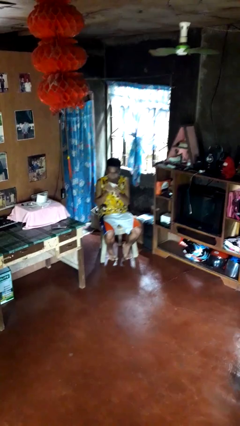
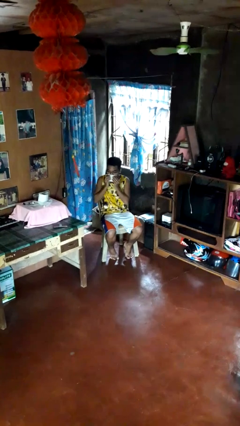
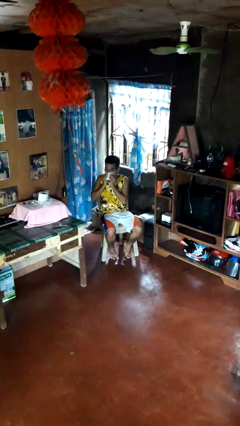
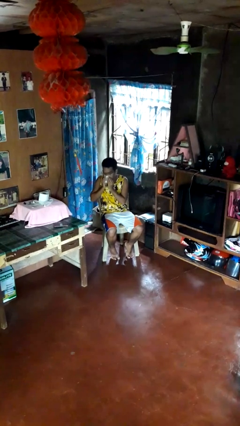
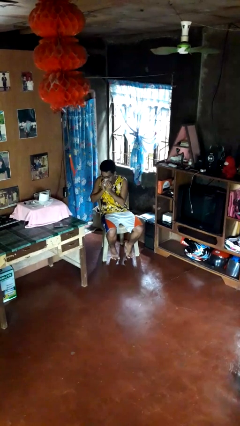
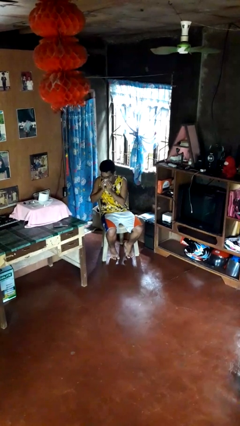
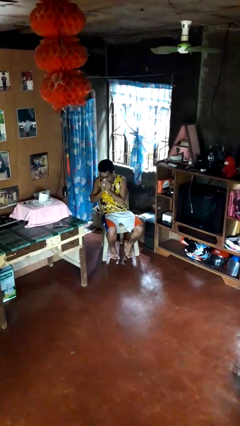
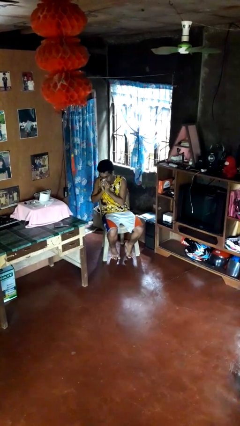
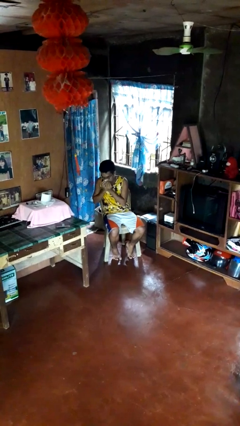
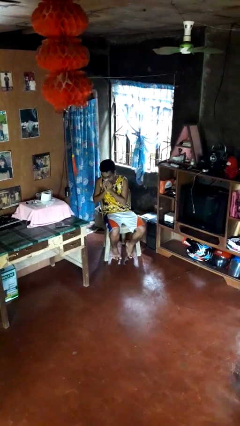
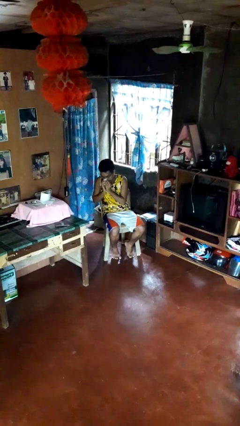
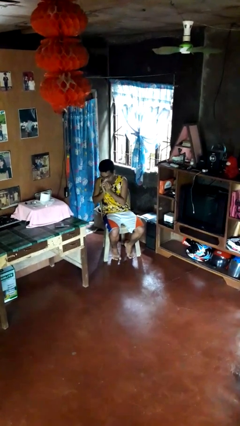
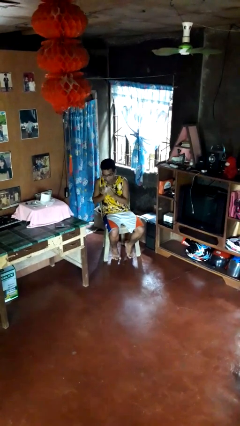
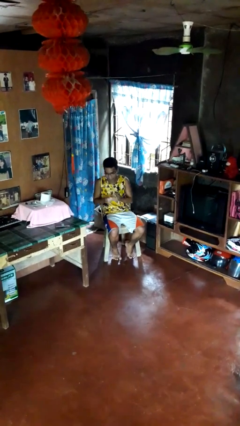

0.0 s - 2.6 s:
person blows nose

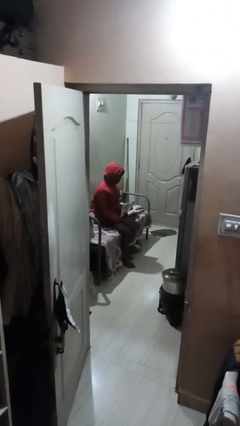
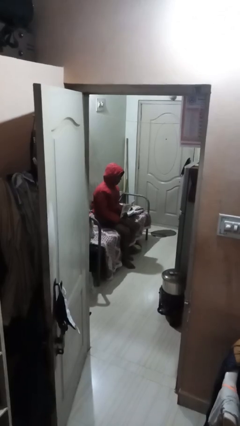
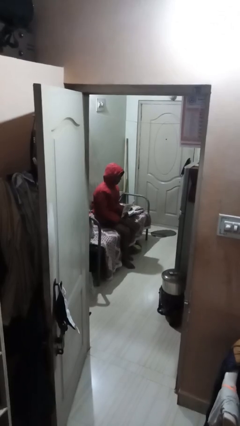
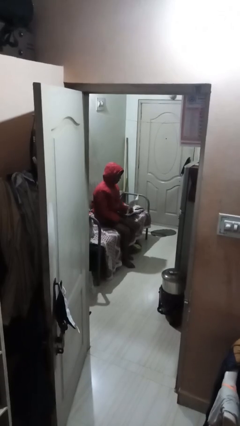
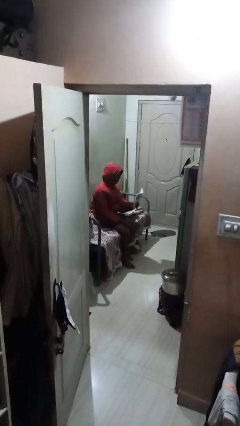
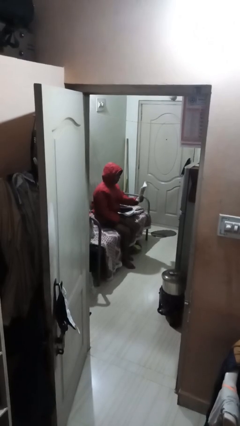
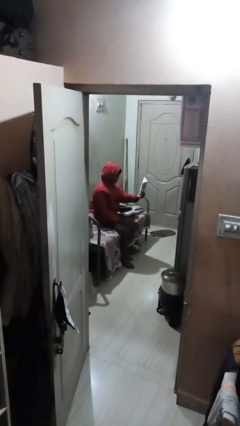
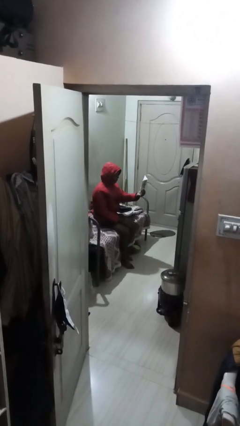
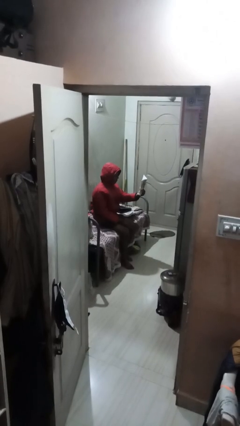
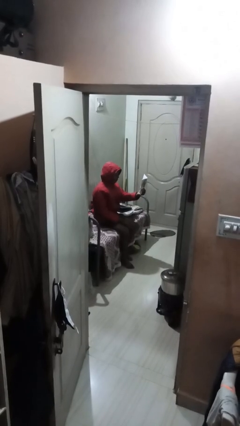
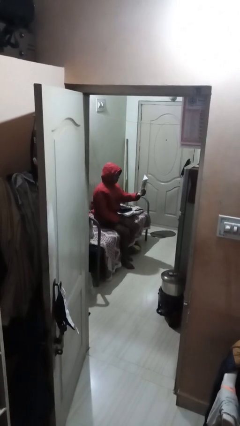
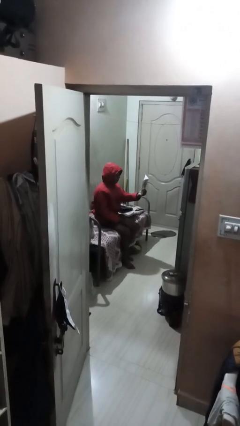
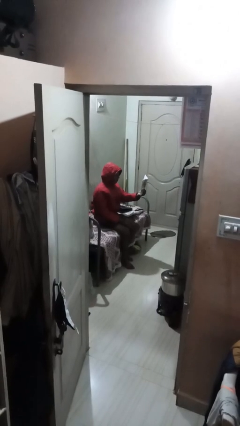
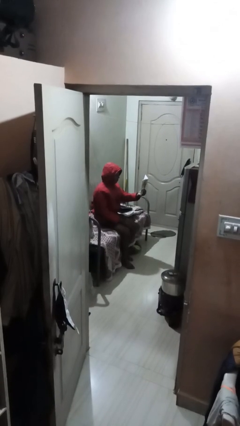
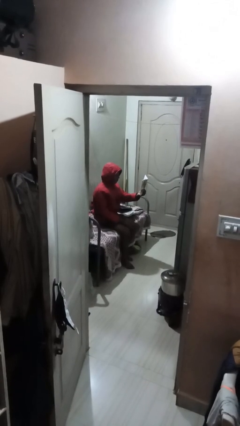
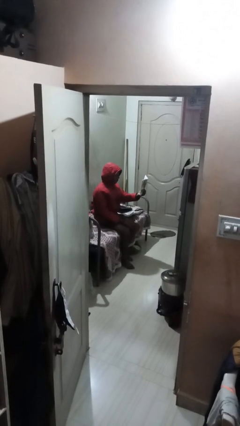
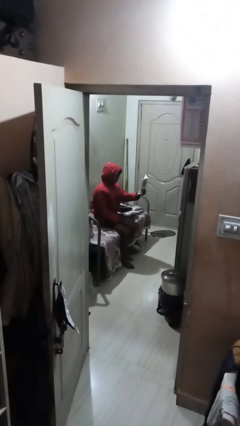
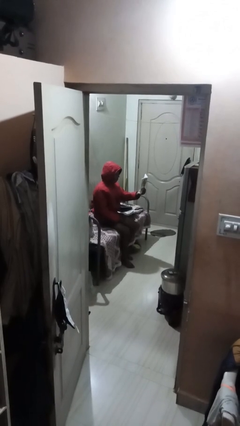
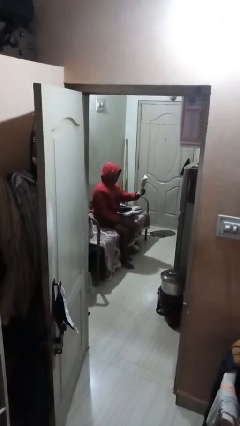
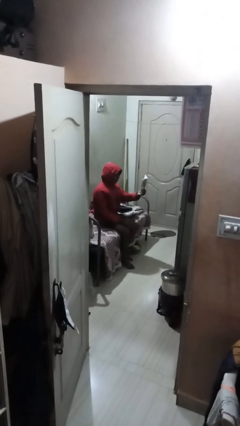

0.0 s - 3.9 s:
person reads document

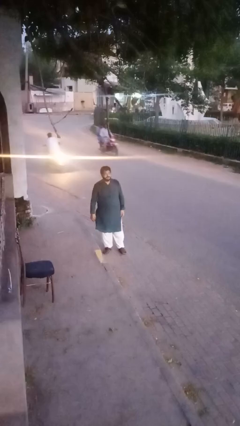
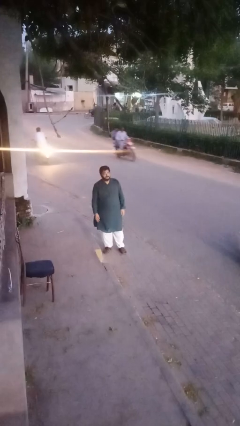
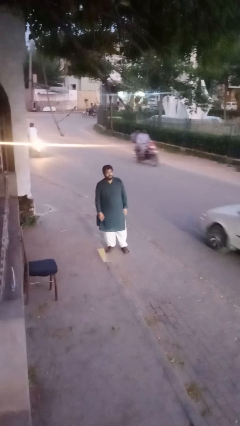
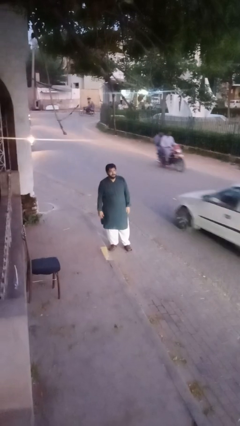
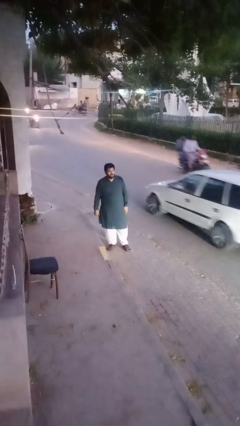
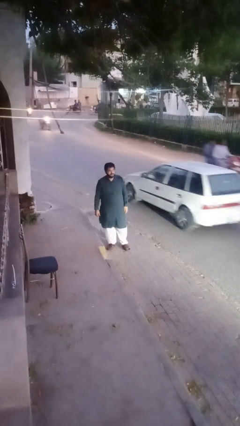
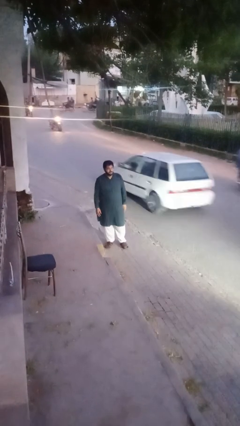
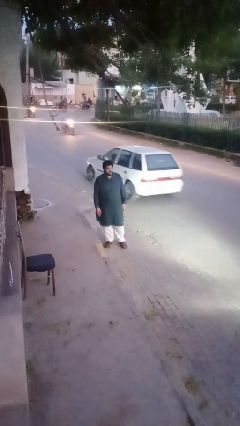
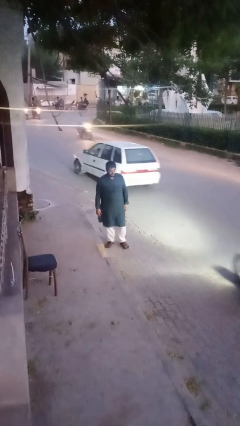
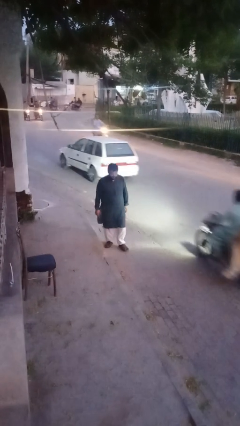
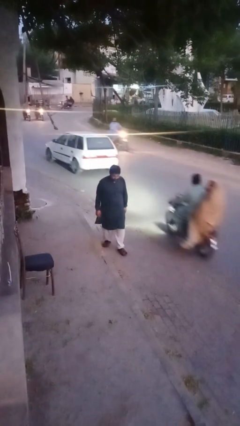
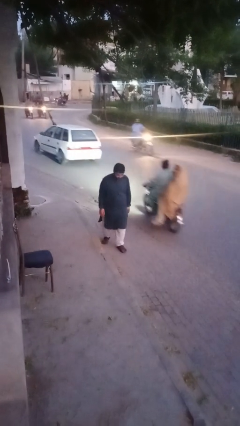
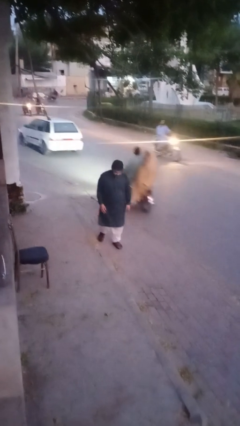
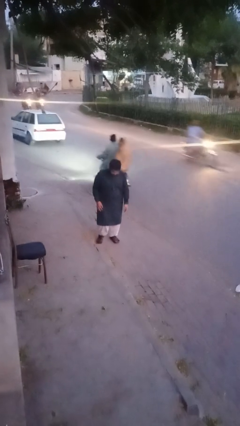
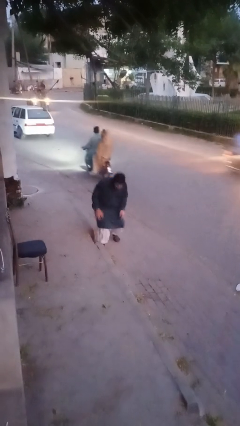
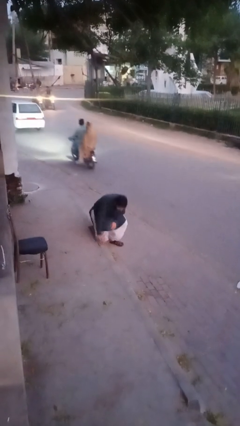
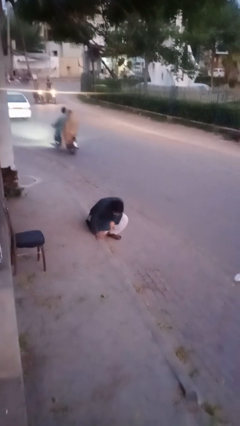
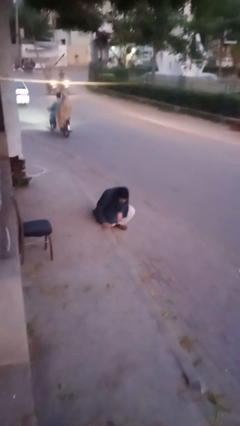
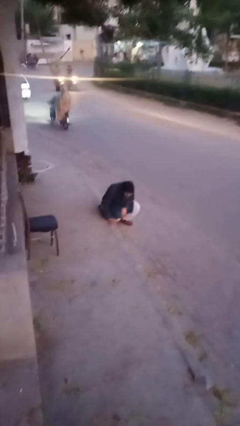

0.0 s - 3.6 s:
person trips on object on floor

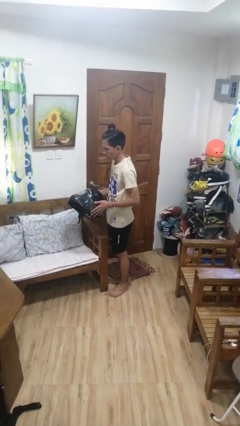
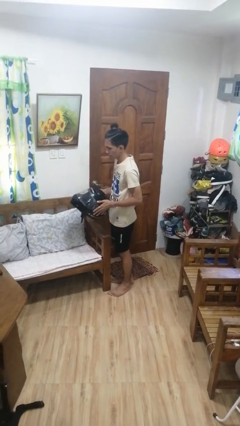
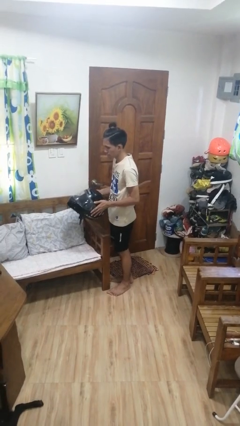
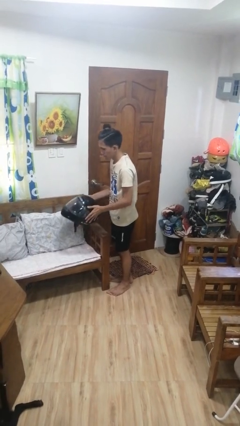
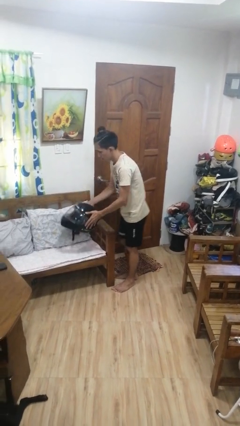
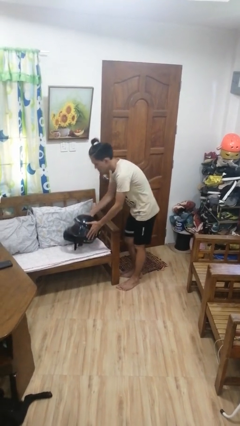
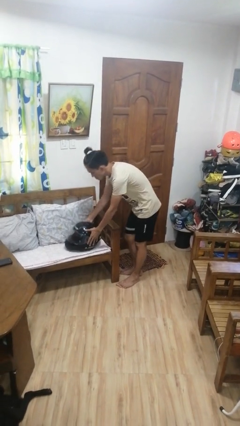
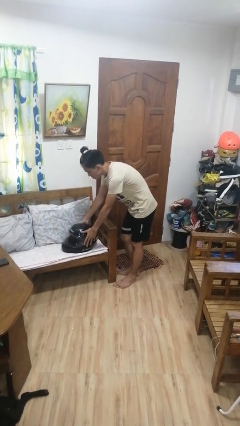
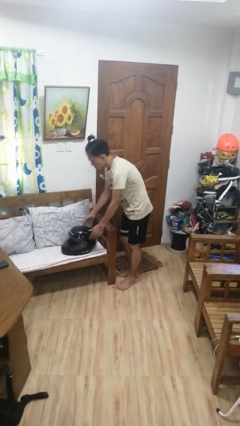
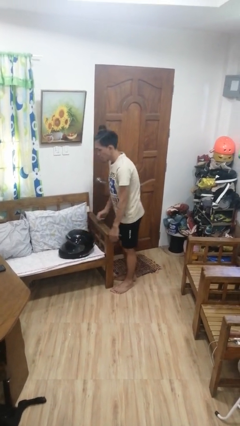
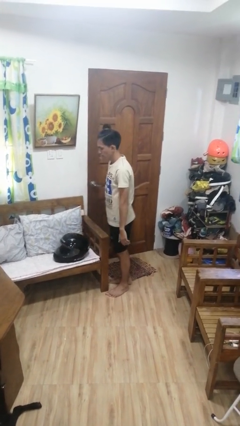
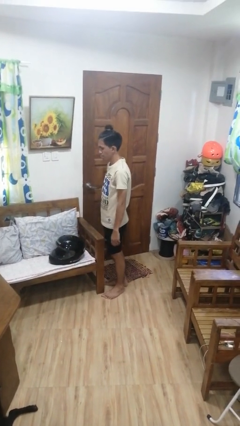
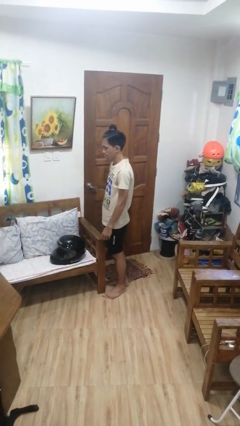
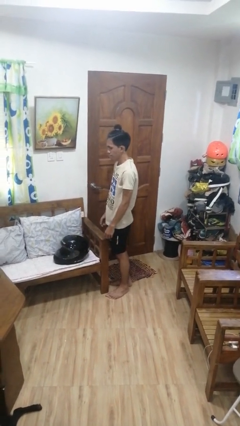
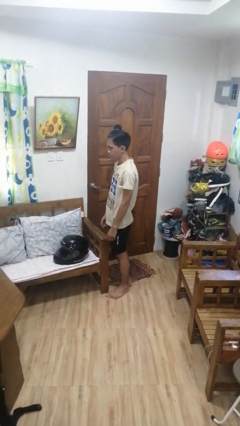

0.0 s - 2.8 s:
person puts down object on couch

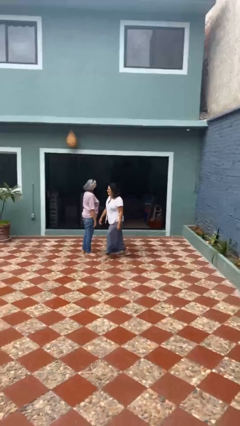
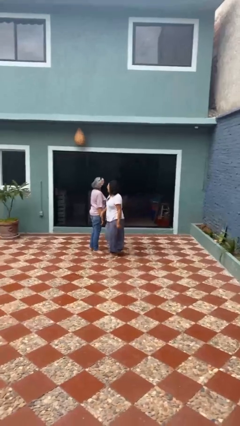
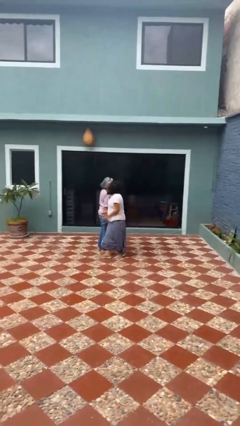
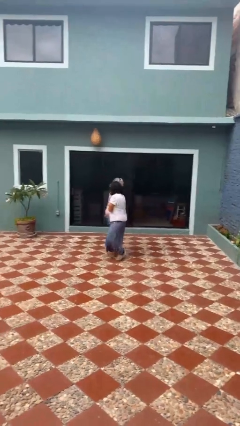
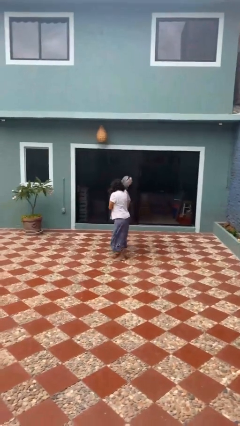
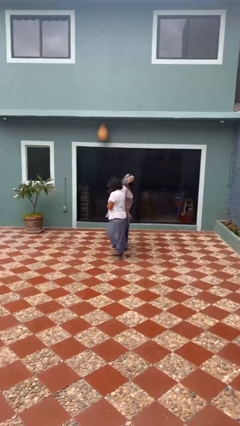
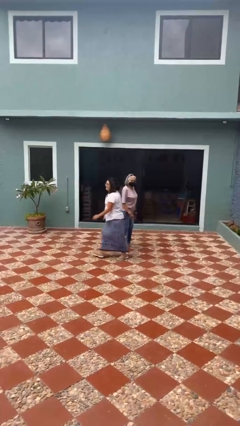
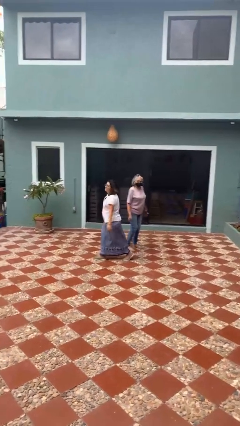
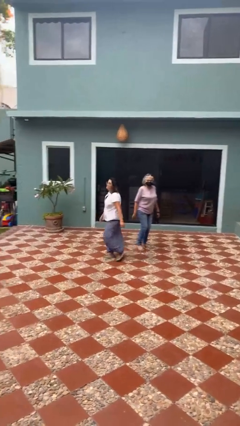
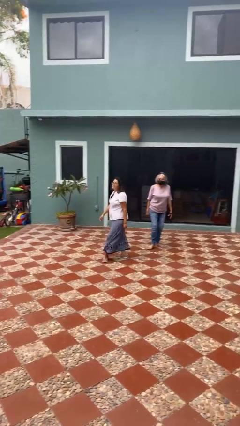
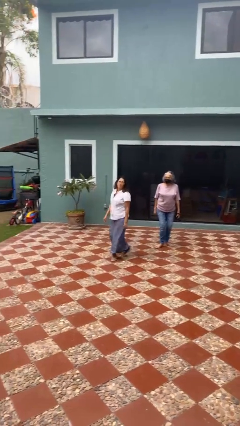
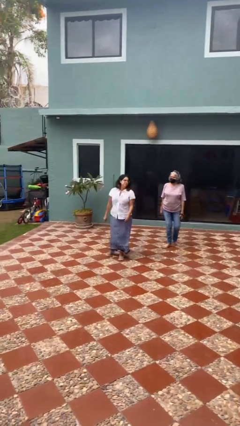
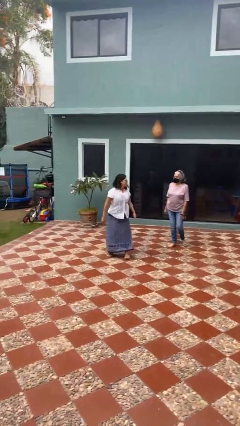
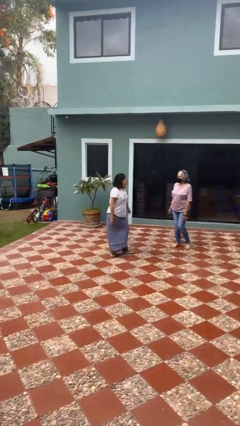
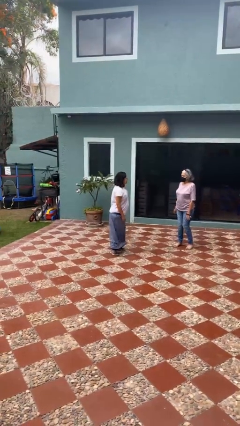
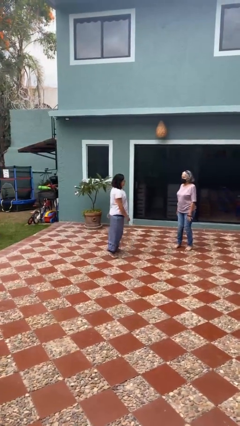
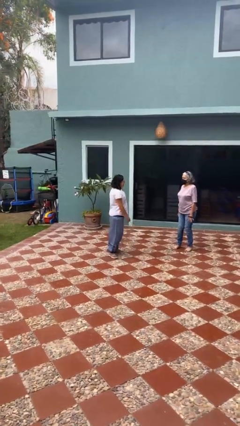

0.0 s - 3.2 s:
person bumps into person

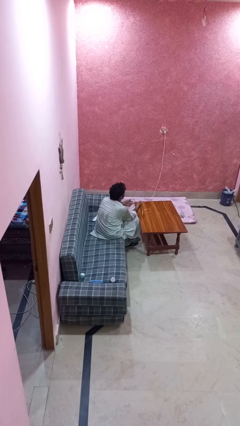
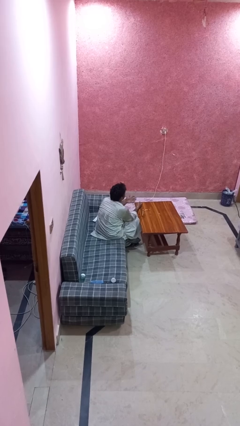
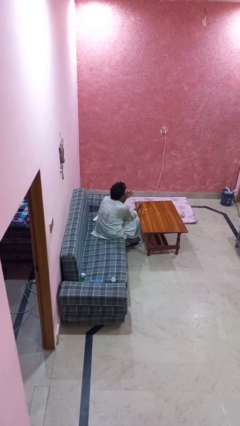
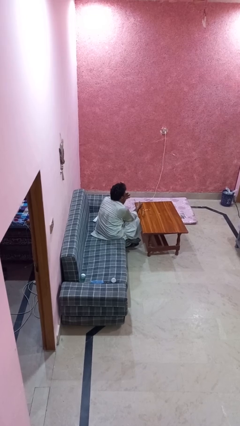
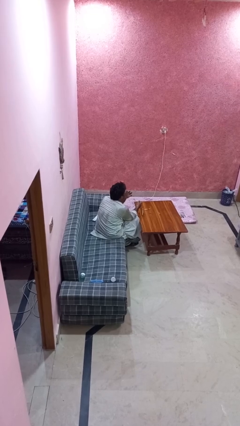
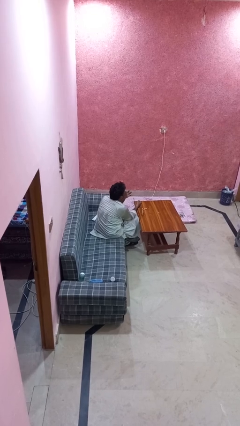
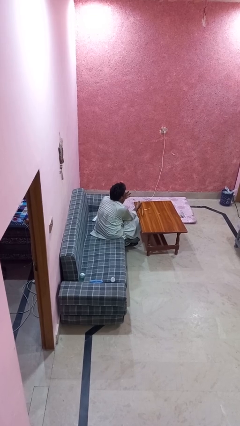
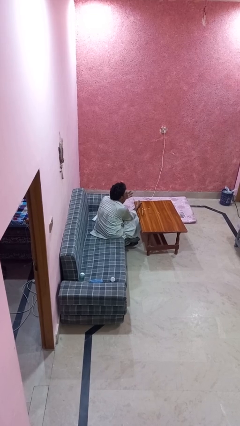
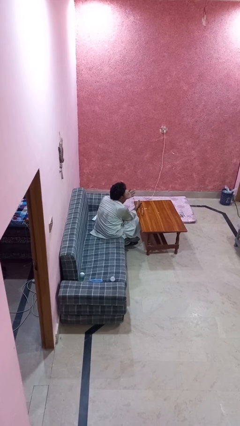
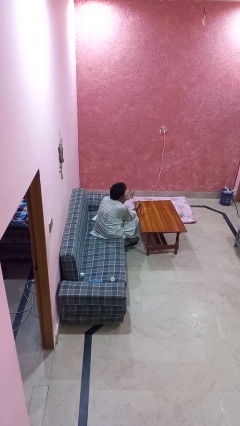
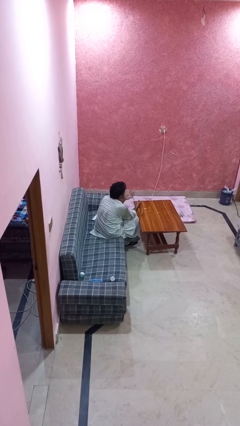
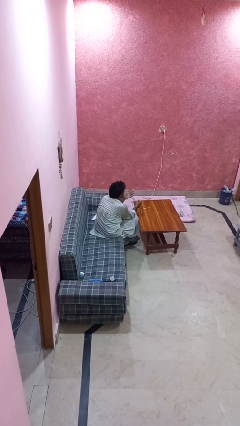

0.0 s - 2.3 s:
person licks fingers
